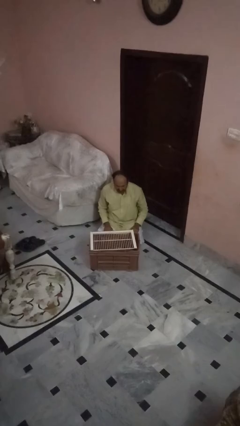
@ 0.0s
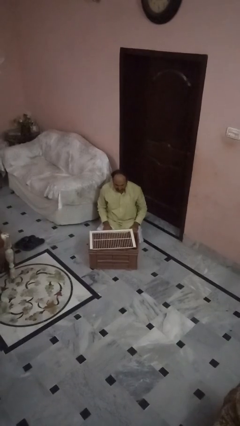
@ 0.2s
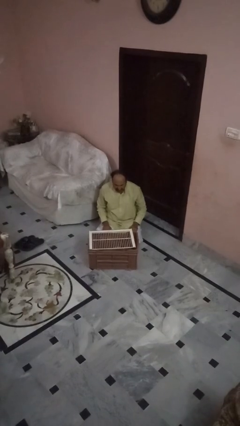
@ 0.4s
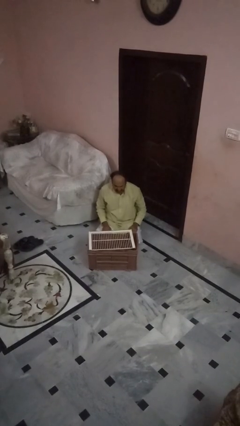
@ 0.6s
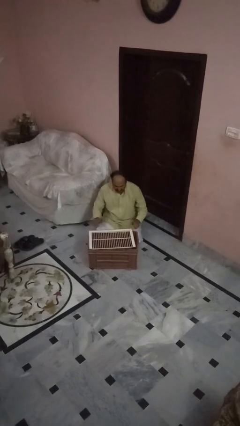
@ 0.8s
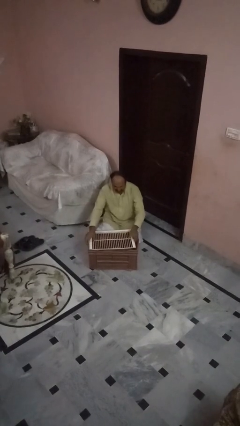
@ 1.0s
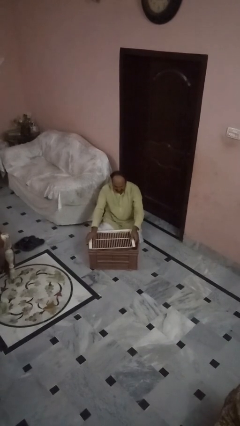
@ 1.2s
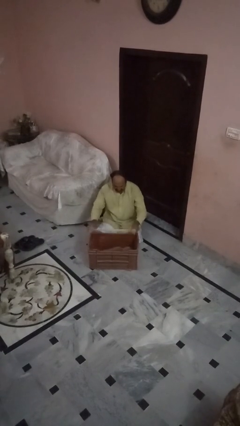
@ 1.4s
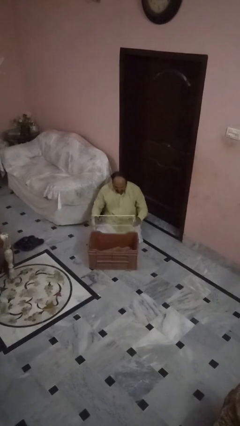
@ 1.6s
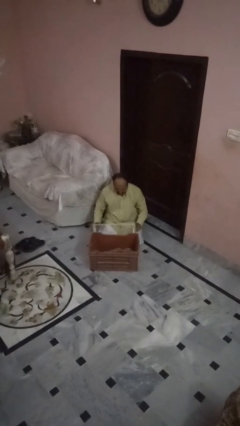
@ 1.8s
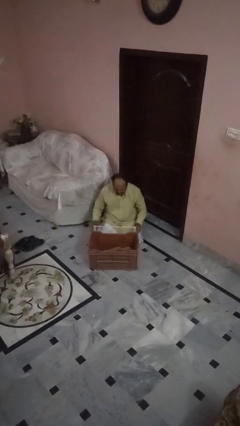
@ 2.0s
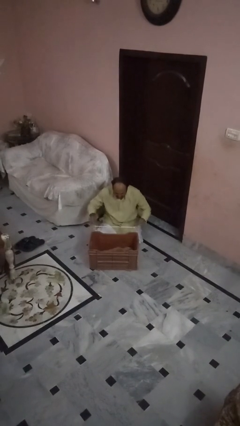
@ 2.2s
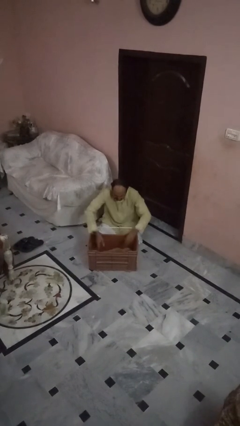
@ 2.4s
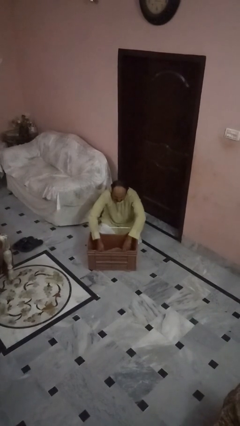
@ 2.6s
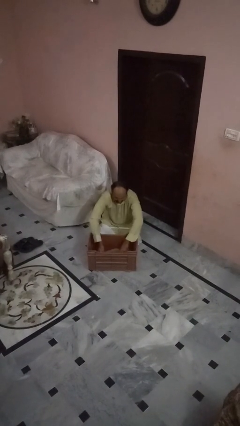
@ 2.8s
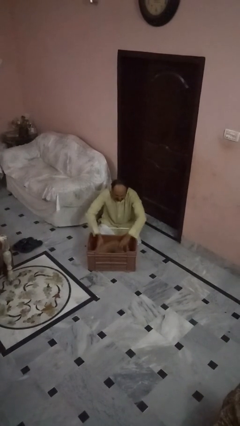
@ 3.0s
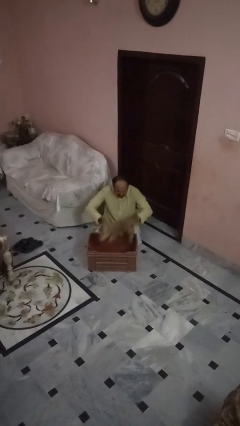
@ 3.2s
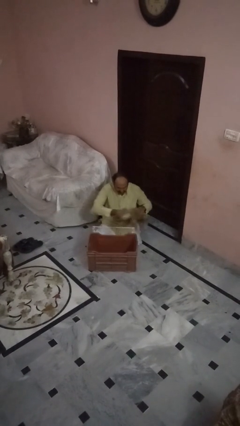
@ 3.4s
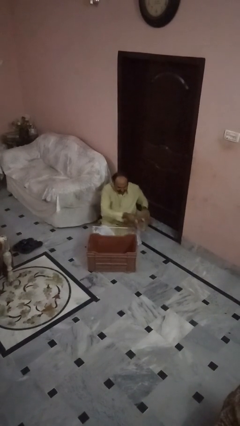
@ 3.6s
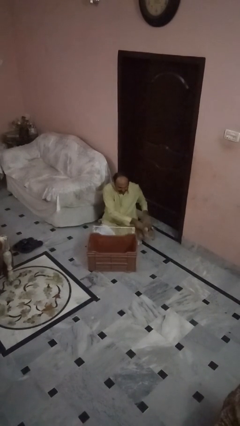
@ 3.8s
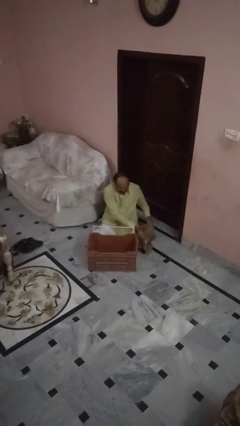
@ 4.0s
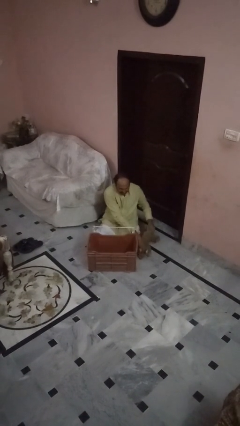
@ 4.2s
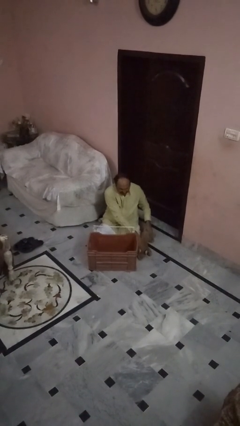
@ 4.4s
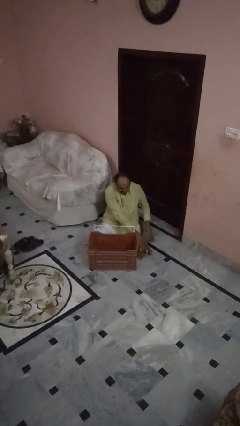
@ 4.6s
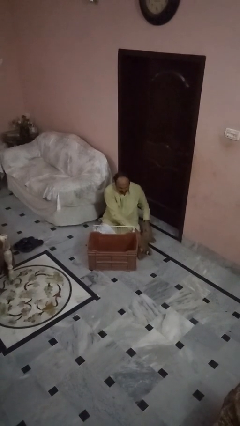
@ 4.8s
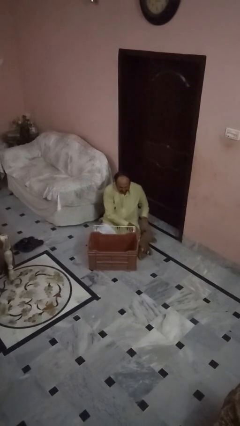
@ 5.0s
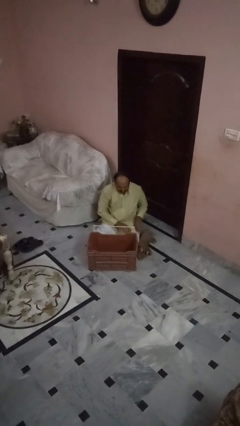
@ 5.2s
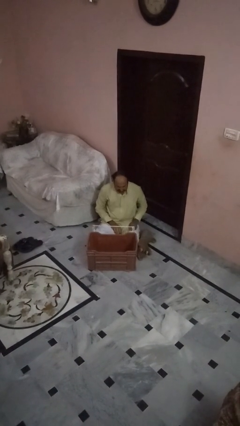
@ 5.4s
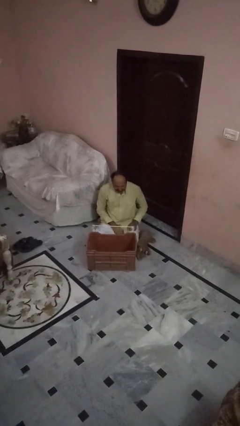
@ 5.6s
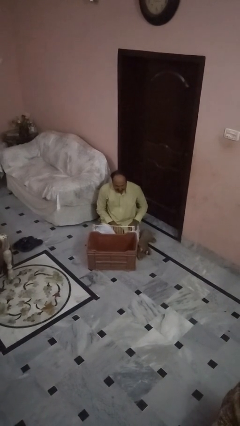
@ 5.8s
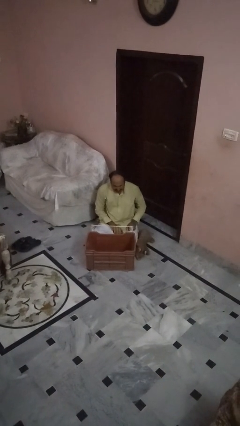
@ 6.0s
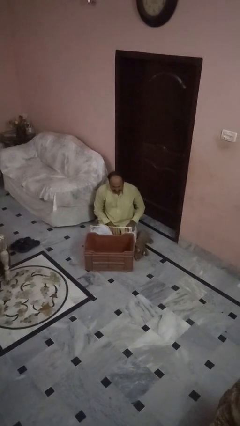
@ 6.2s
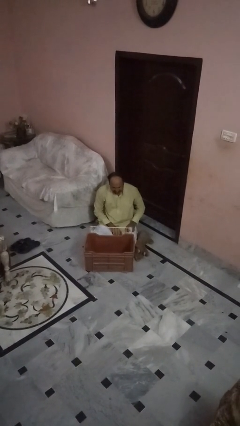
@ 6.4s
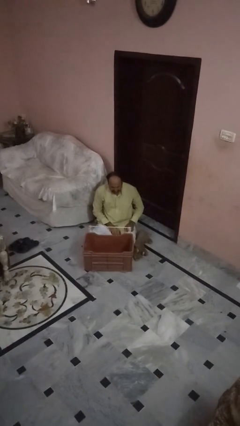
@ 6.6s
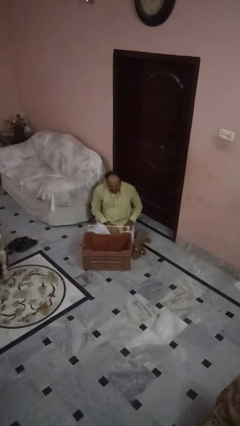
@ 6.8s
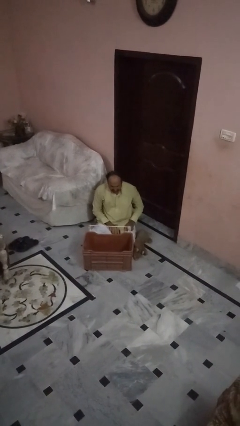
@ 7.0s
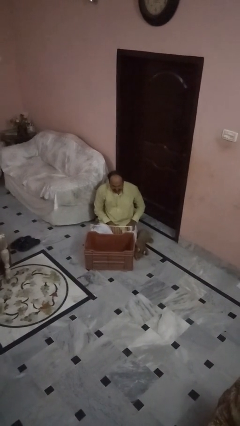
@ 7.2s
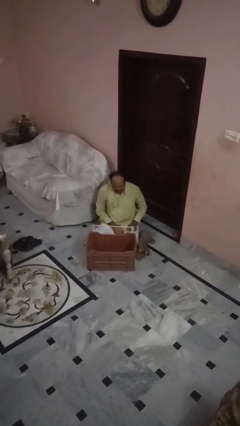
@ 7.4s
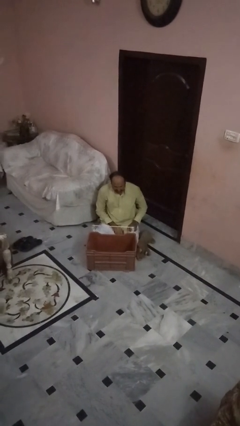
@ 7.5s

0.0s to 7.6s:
person uncrates dog

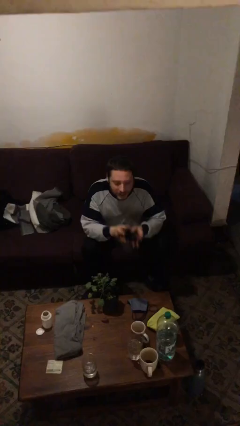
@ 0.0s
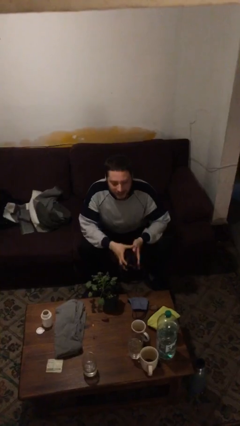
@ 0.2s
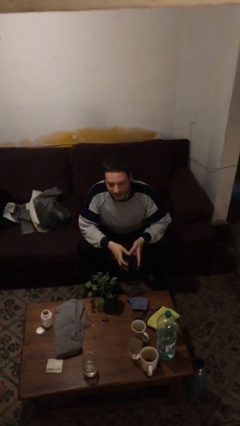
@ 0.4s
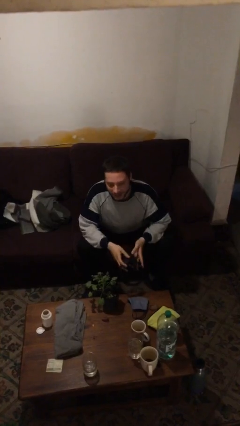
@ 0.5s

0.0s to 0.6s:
person takes off headphones

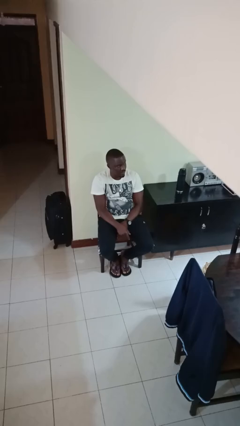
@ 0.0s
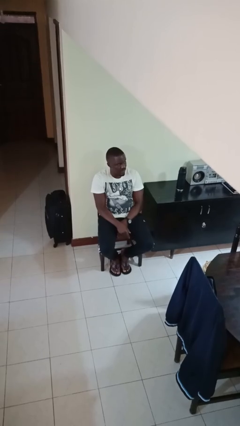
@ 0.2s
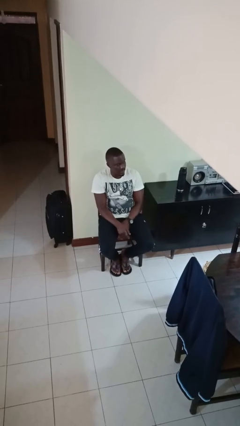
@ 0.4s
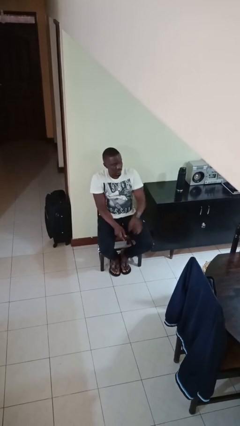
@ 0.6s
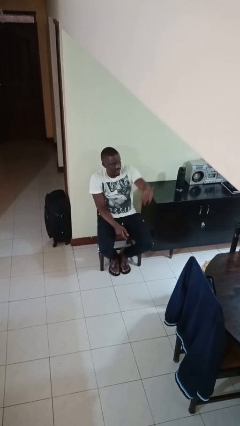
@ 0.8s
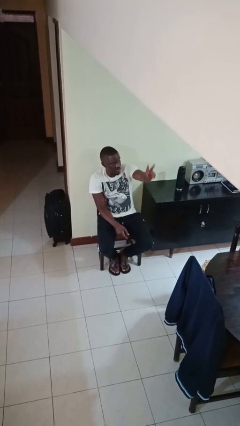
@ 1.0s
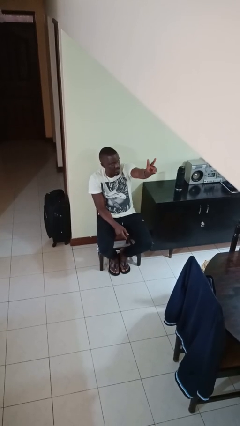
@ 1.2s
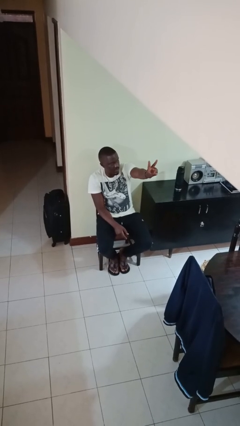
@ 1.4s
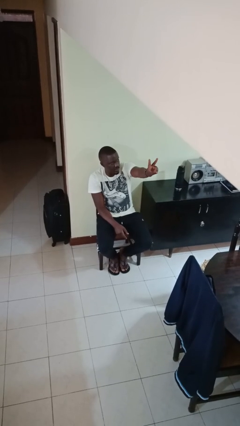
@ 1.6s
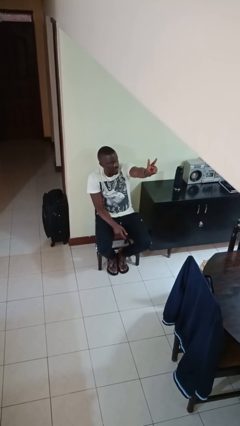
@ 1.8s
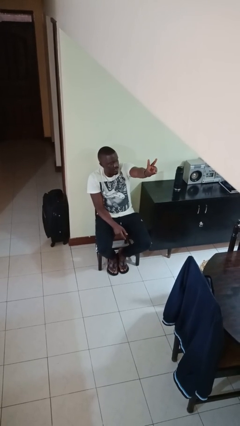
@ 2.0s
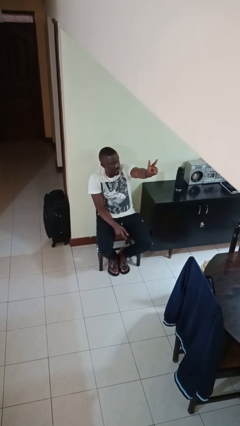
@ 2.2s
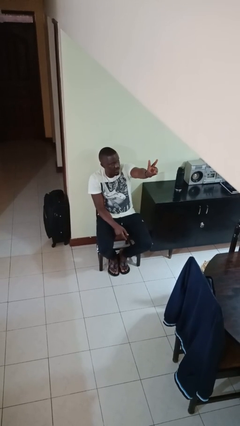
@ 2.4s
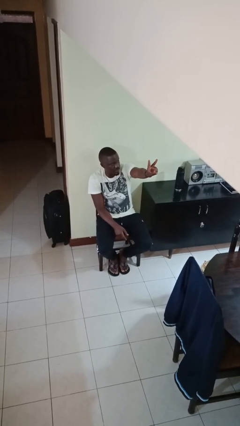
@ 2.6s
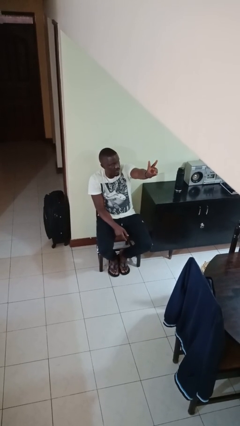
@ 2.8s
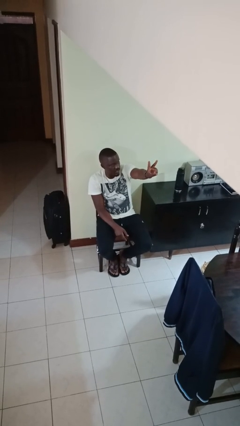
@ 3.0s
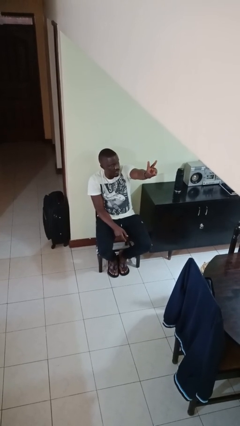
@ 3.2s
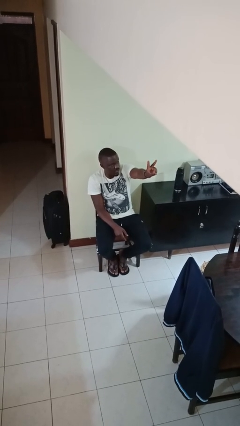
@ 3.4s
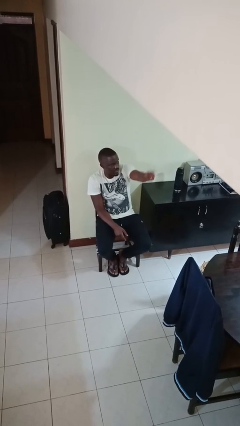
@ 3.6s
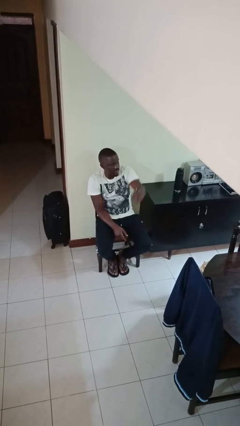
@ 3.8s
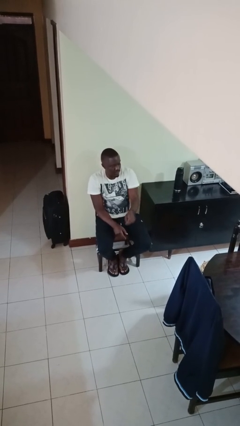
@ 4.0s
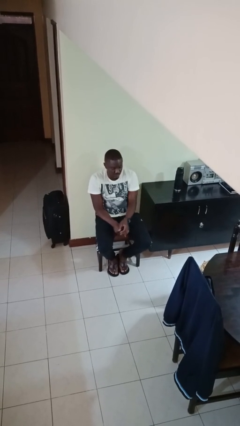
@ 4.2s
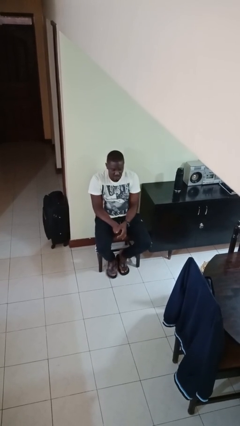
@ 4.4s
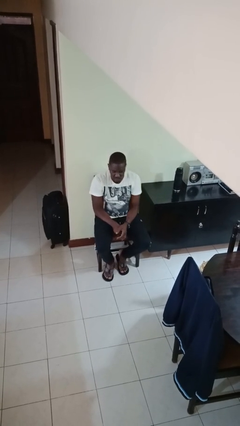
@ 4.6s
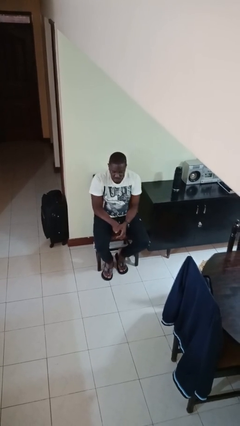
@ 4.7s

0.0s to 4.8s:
person gestures peace

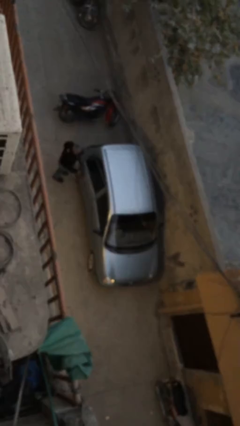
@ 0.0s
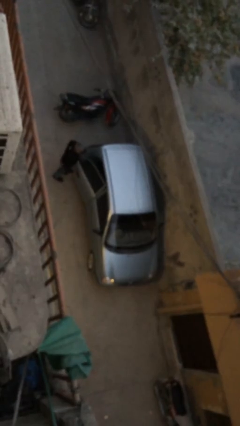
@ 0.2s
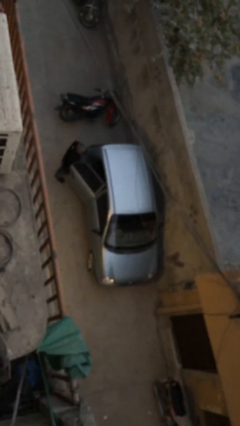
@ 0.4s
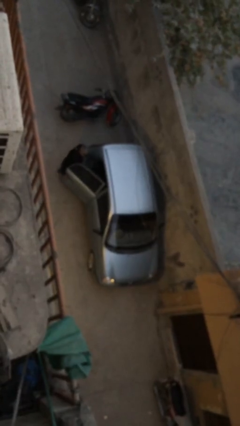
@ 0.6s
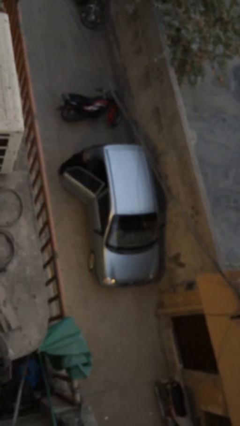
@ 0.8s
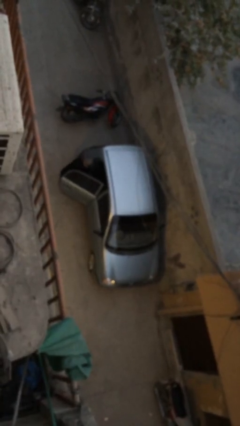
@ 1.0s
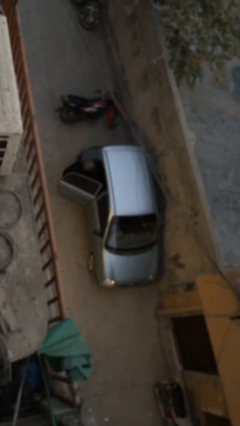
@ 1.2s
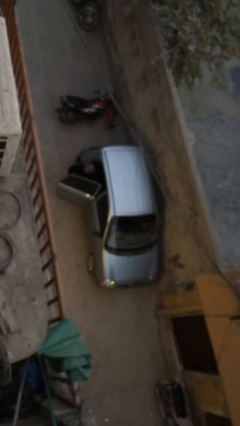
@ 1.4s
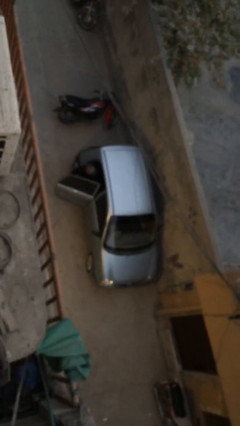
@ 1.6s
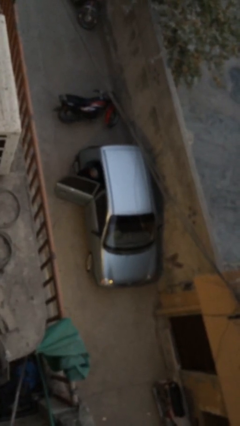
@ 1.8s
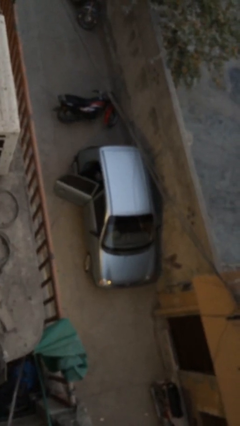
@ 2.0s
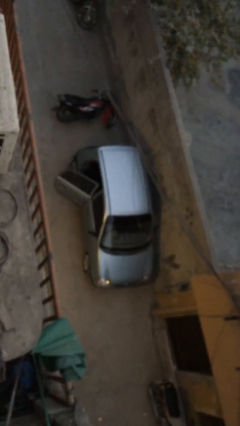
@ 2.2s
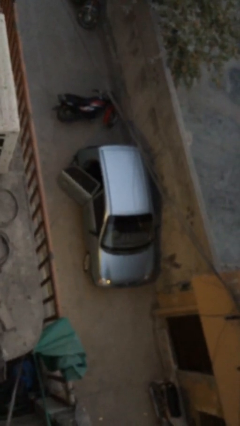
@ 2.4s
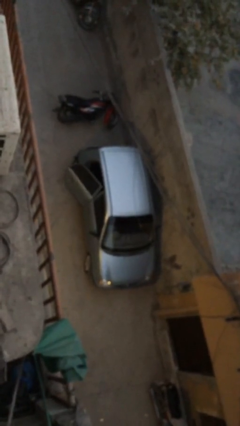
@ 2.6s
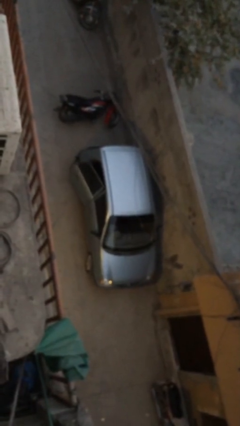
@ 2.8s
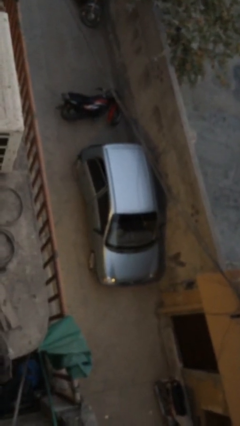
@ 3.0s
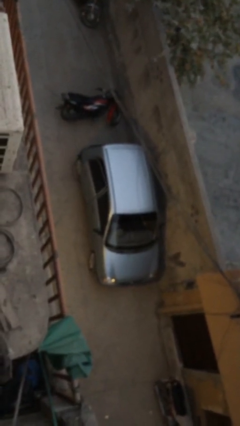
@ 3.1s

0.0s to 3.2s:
car picks up person

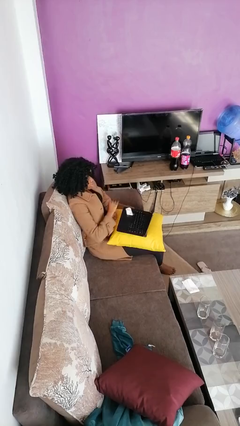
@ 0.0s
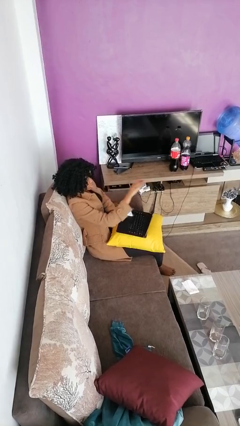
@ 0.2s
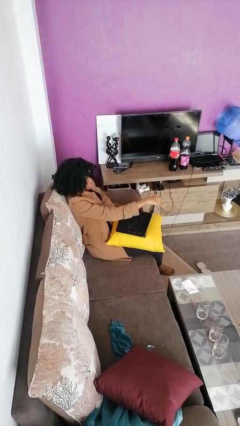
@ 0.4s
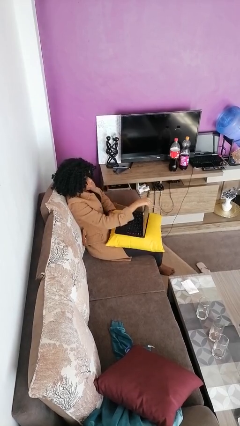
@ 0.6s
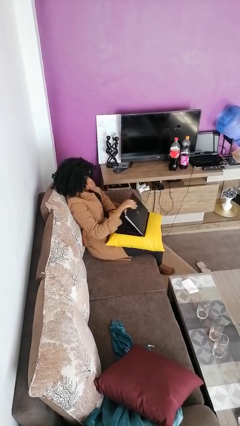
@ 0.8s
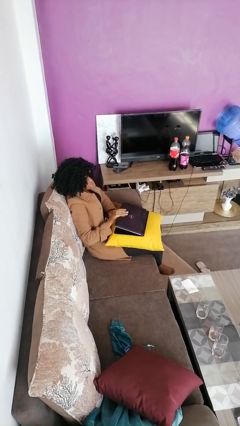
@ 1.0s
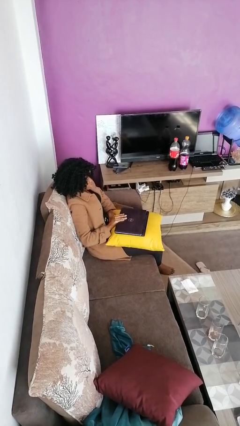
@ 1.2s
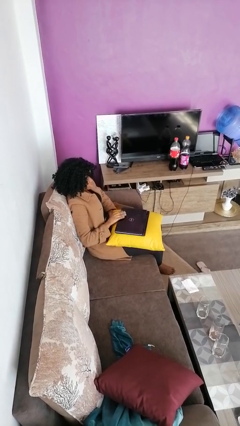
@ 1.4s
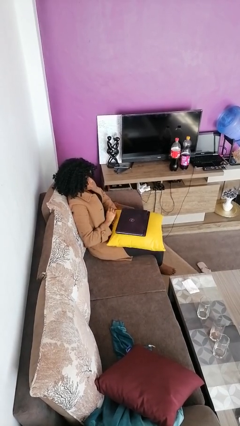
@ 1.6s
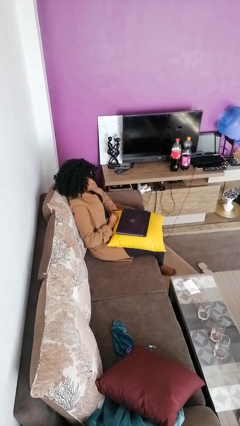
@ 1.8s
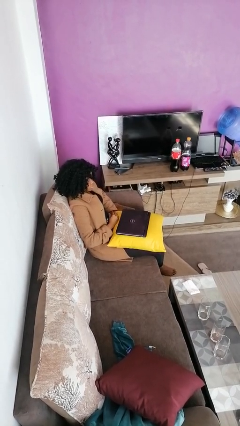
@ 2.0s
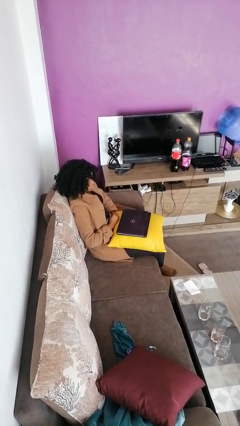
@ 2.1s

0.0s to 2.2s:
person closes laptop
